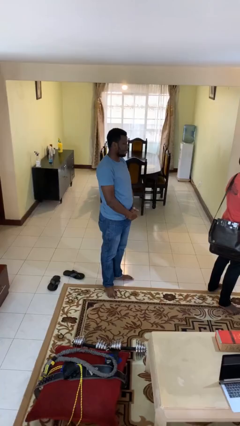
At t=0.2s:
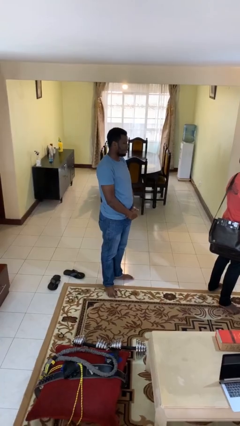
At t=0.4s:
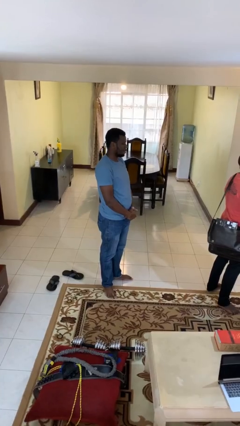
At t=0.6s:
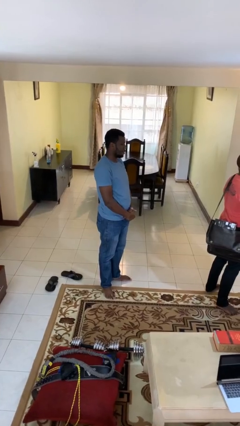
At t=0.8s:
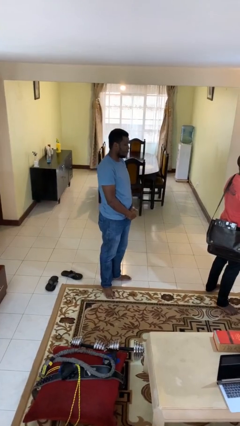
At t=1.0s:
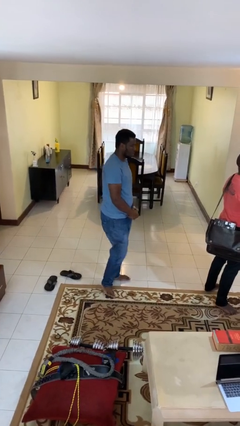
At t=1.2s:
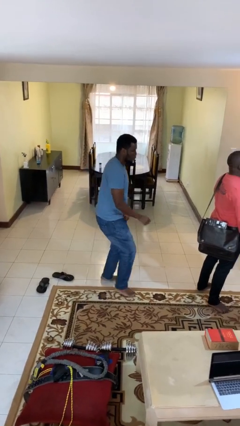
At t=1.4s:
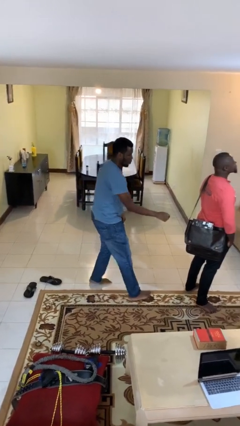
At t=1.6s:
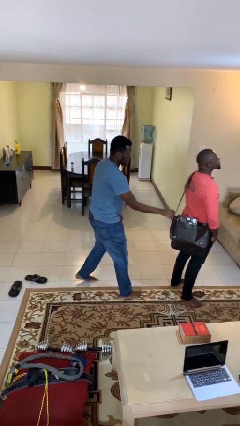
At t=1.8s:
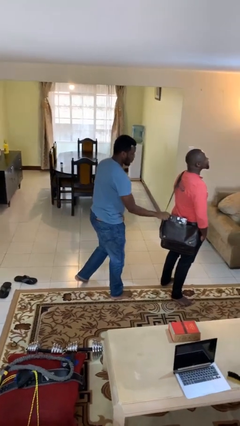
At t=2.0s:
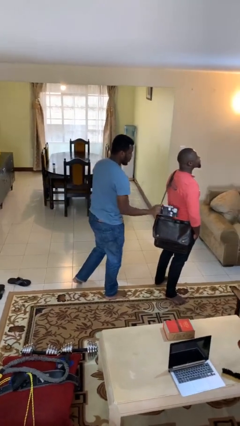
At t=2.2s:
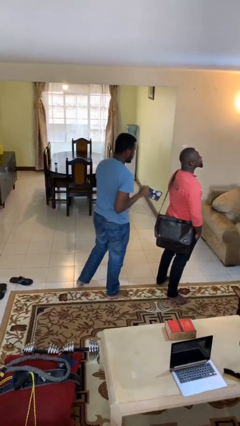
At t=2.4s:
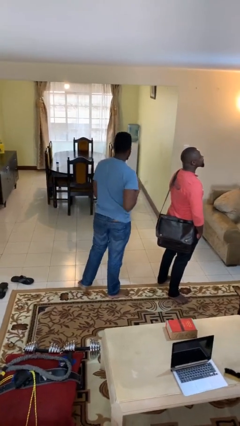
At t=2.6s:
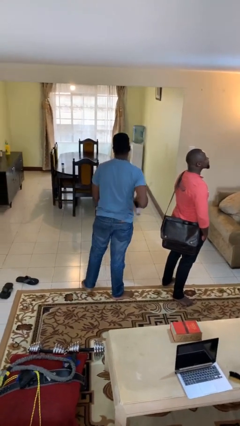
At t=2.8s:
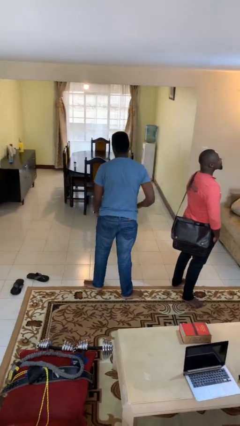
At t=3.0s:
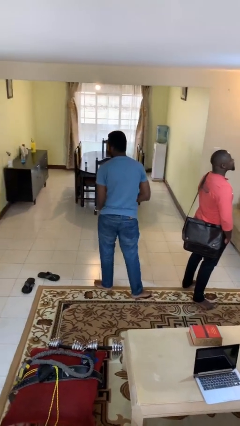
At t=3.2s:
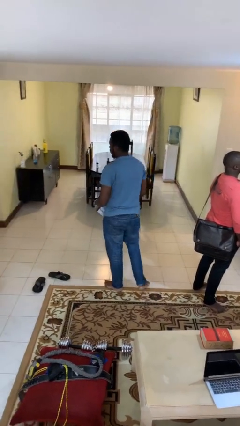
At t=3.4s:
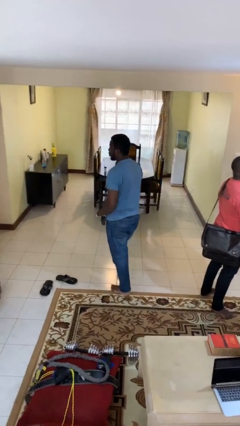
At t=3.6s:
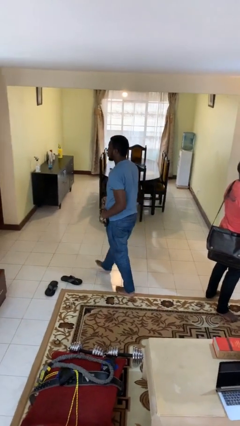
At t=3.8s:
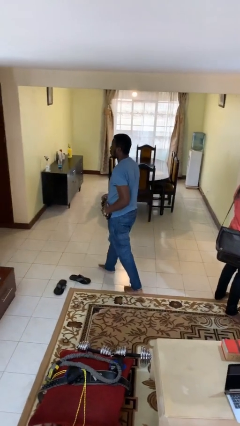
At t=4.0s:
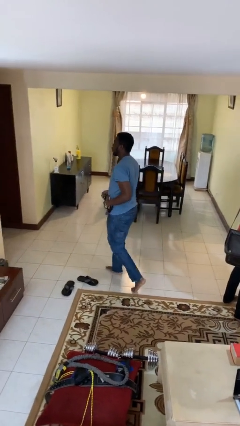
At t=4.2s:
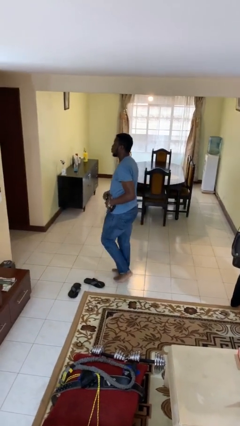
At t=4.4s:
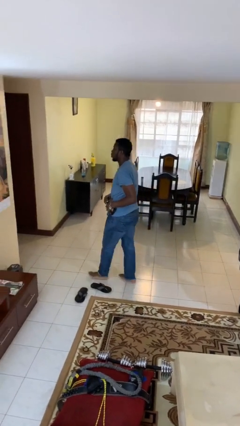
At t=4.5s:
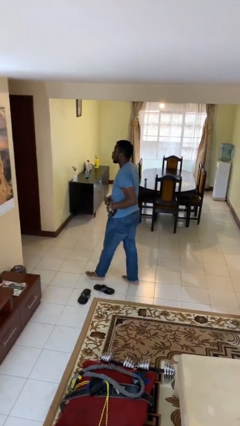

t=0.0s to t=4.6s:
person steals object from person

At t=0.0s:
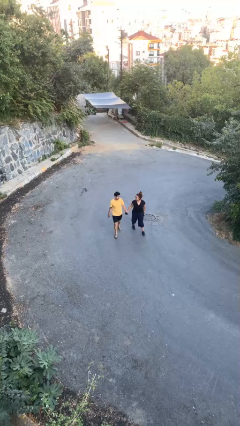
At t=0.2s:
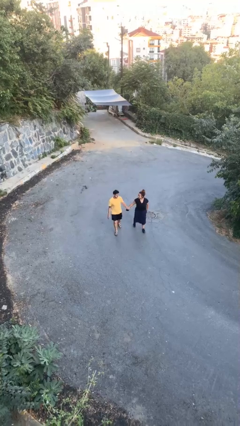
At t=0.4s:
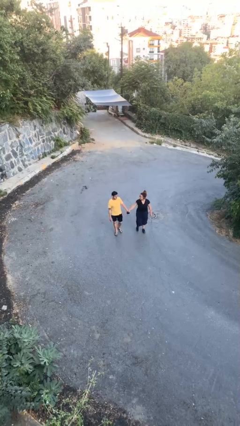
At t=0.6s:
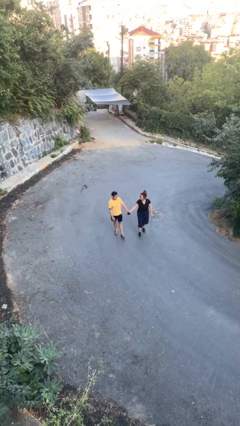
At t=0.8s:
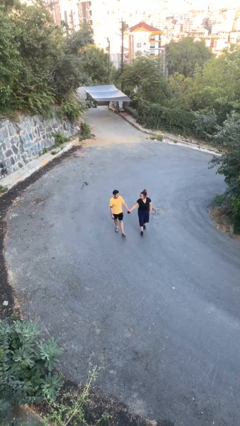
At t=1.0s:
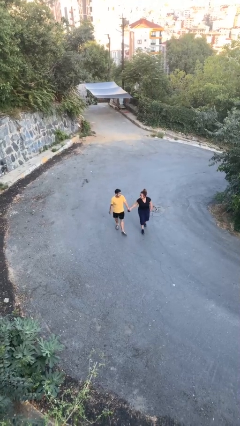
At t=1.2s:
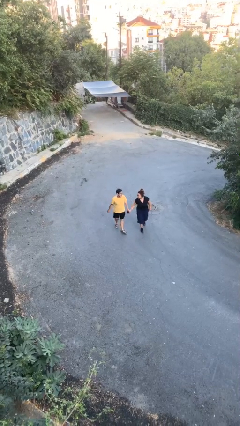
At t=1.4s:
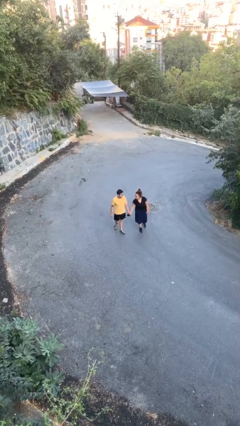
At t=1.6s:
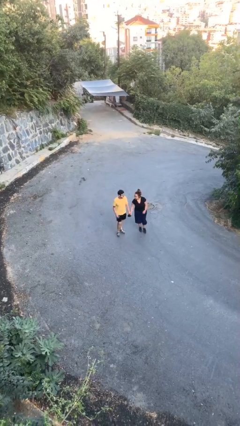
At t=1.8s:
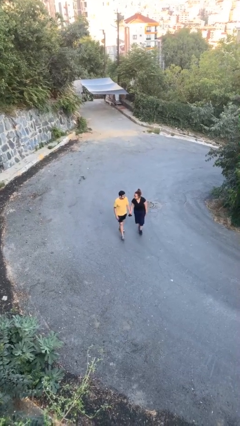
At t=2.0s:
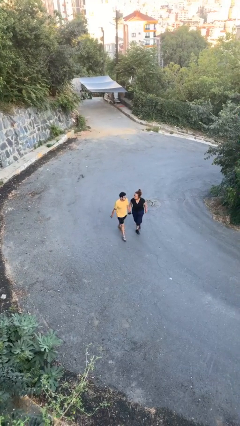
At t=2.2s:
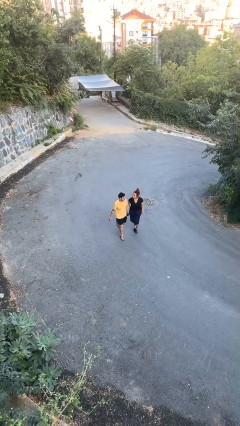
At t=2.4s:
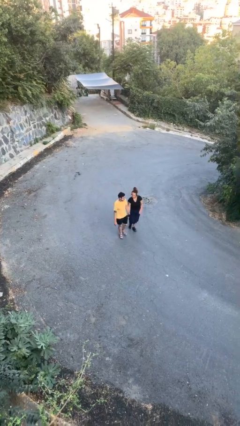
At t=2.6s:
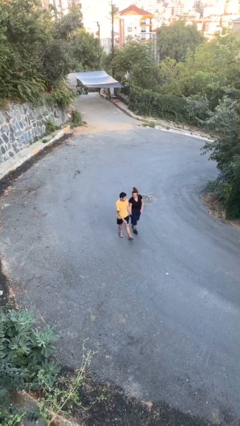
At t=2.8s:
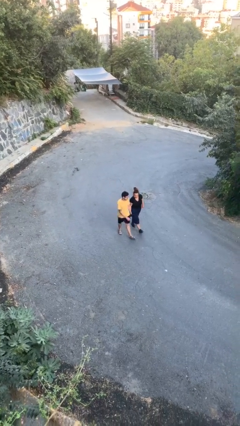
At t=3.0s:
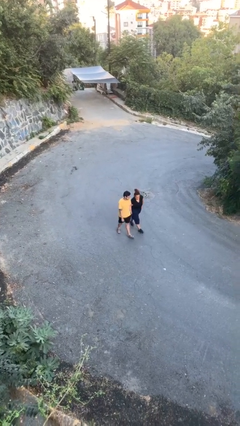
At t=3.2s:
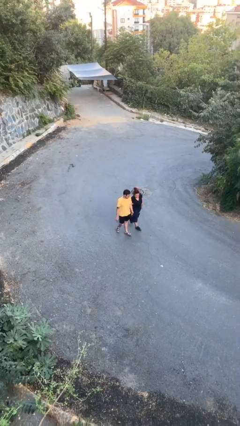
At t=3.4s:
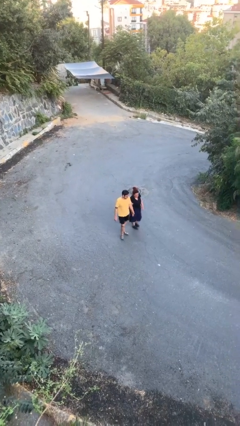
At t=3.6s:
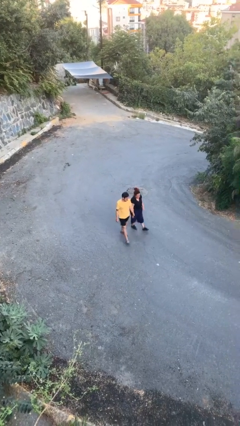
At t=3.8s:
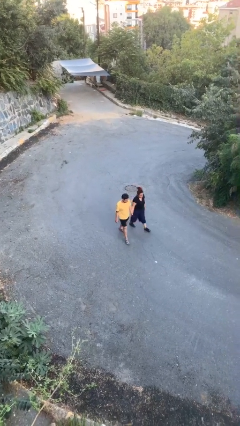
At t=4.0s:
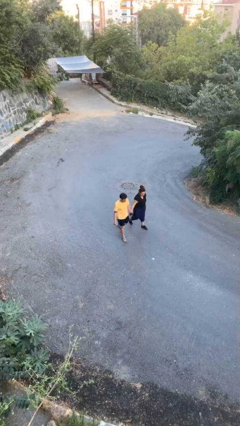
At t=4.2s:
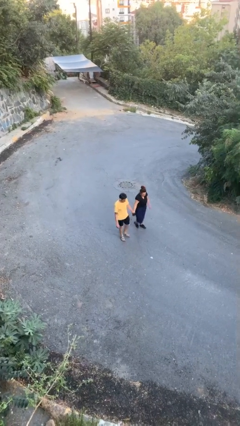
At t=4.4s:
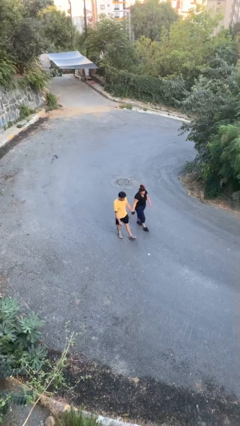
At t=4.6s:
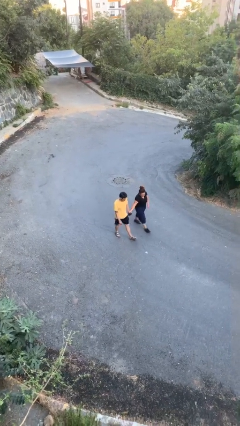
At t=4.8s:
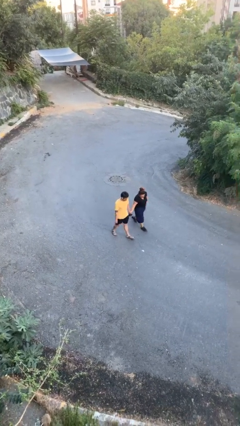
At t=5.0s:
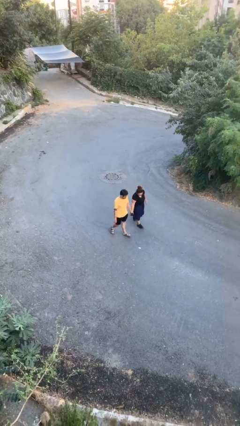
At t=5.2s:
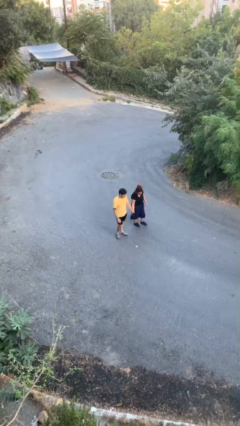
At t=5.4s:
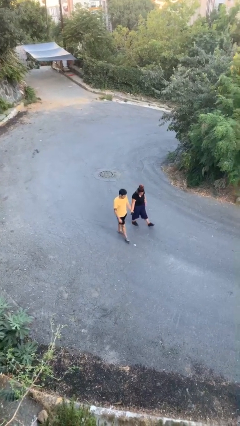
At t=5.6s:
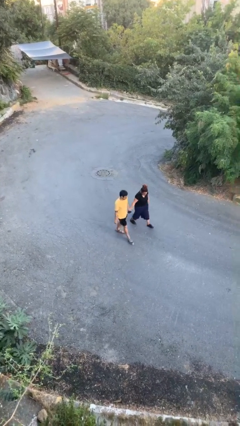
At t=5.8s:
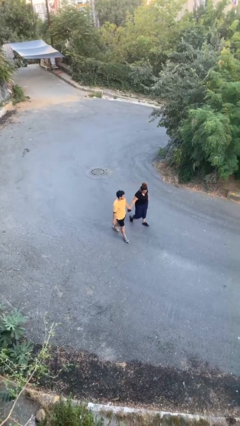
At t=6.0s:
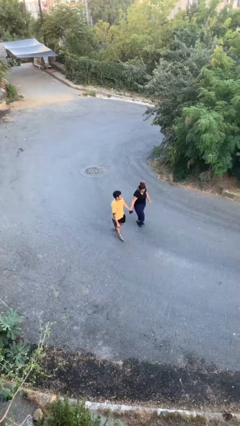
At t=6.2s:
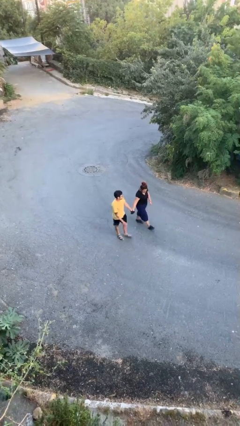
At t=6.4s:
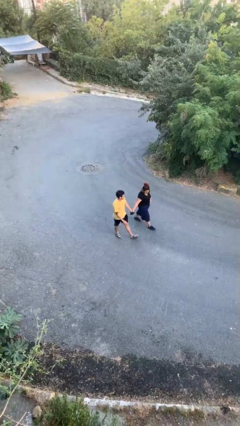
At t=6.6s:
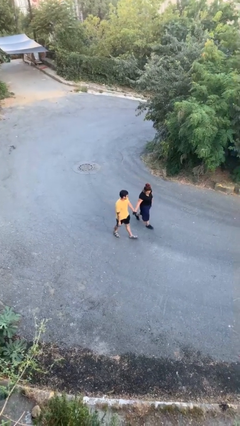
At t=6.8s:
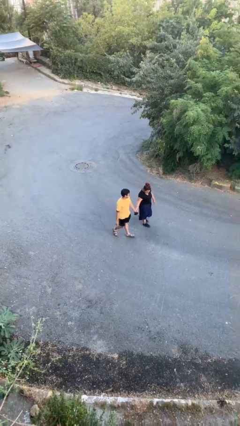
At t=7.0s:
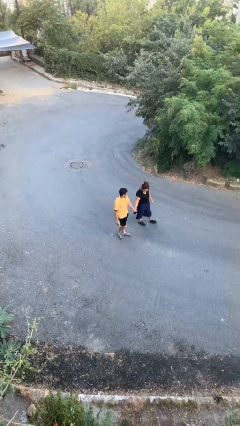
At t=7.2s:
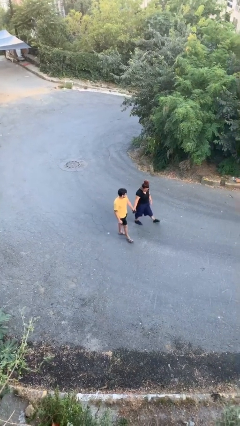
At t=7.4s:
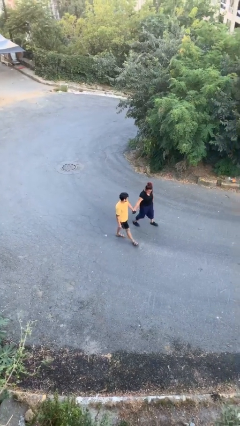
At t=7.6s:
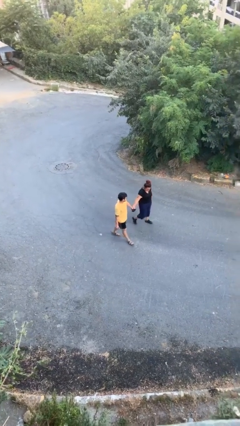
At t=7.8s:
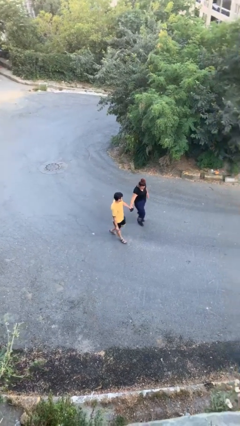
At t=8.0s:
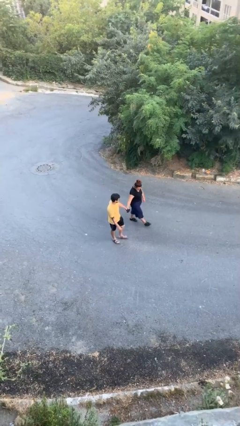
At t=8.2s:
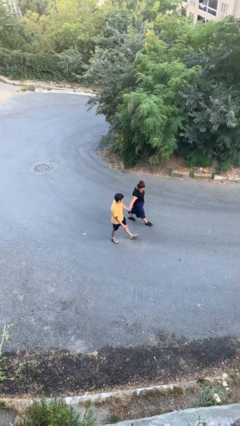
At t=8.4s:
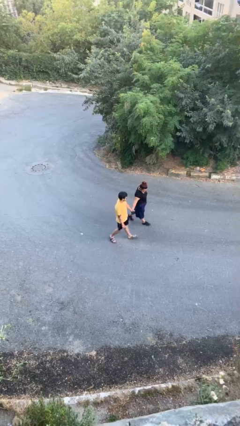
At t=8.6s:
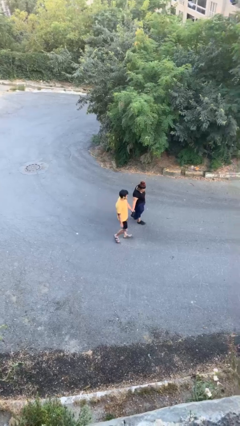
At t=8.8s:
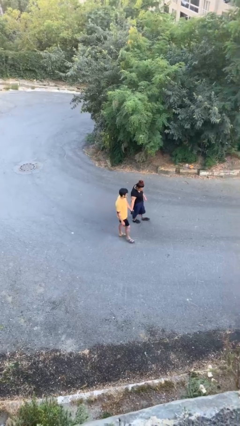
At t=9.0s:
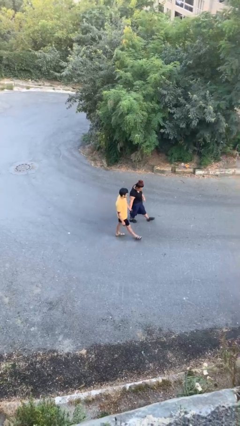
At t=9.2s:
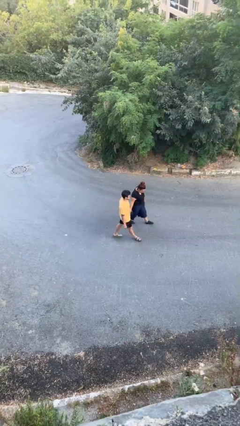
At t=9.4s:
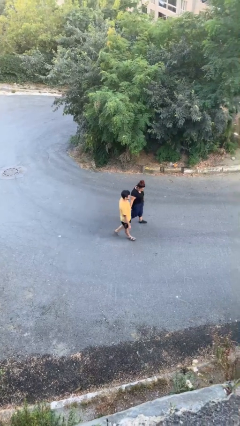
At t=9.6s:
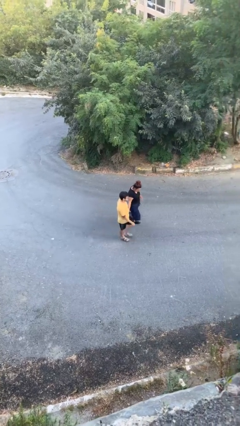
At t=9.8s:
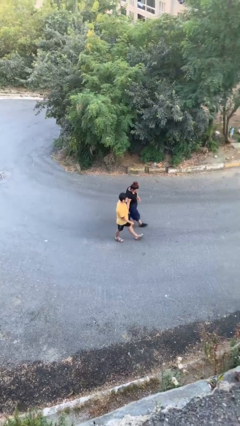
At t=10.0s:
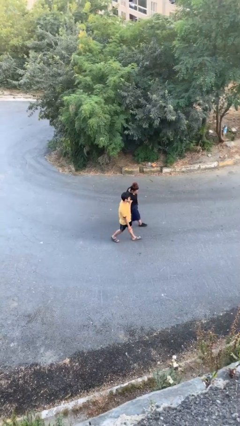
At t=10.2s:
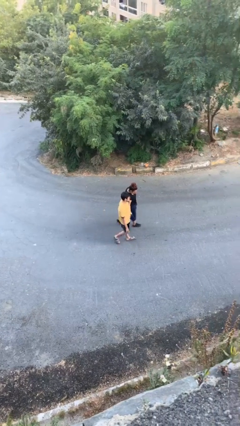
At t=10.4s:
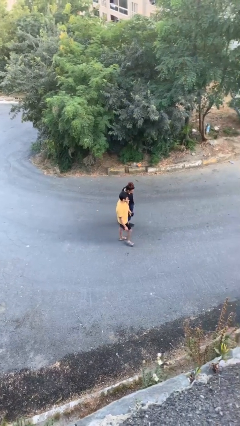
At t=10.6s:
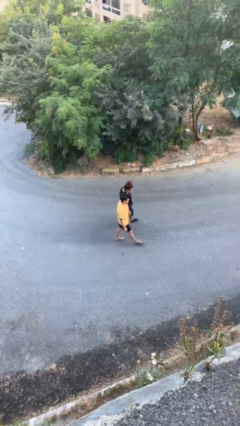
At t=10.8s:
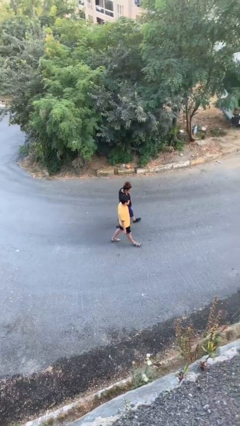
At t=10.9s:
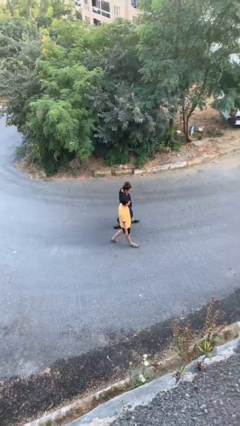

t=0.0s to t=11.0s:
person holds hand

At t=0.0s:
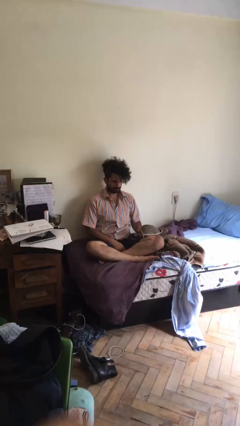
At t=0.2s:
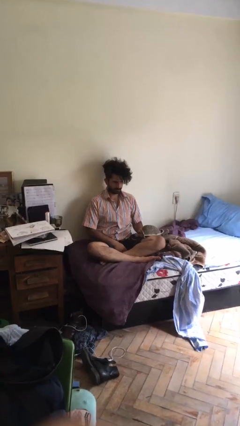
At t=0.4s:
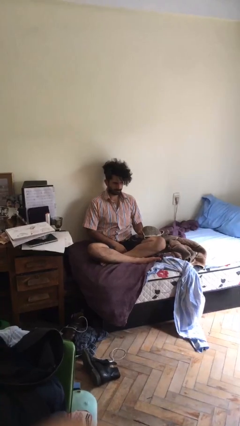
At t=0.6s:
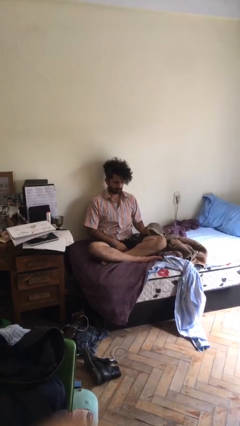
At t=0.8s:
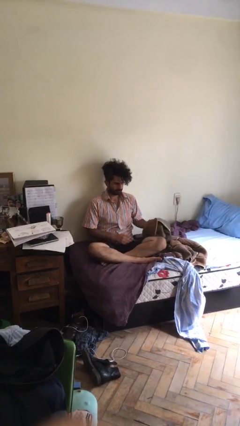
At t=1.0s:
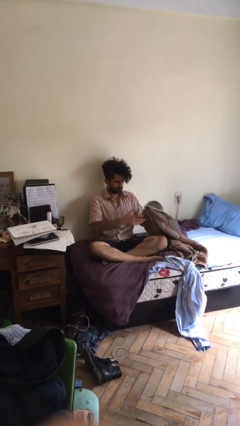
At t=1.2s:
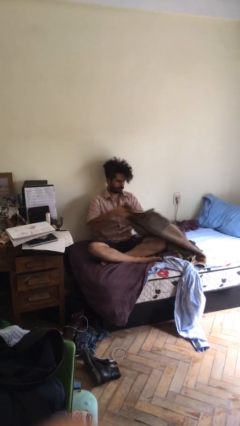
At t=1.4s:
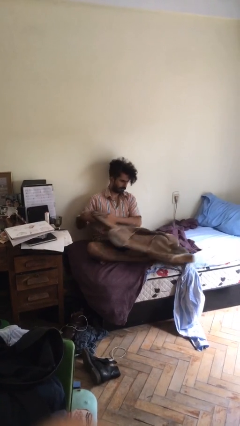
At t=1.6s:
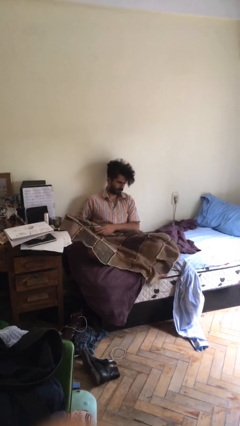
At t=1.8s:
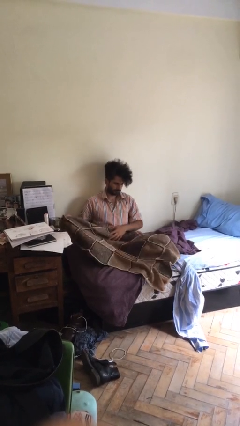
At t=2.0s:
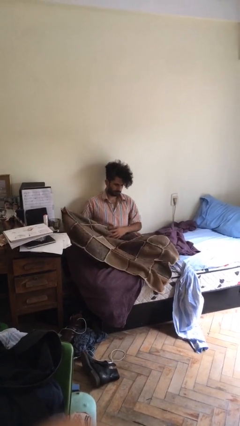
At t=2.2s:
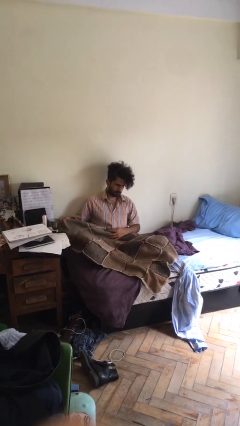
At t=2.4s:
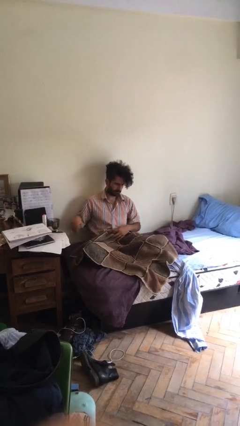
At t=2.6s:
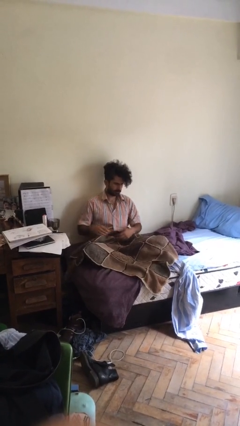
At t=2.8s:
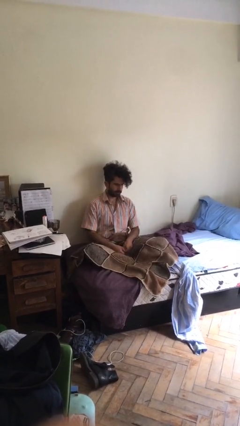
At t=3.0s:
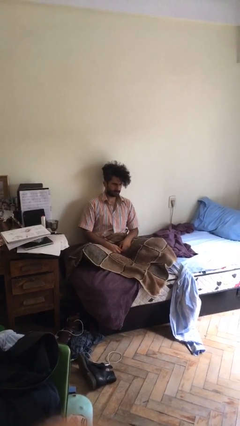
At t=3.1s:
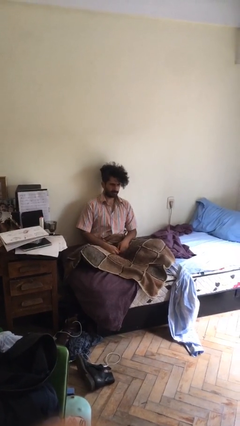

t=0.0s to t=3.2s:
person covers with blanket
